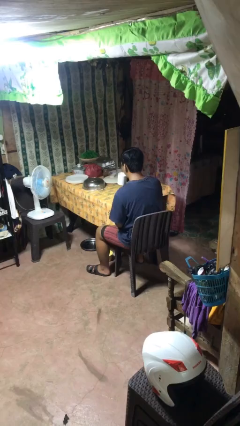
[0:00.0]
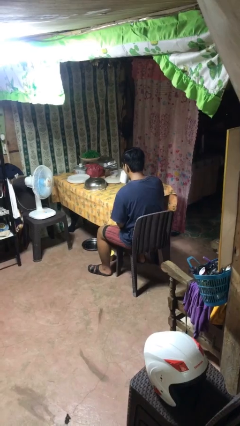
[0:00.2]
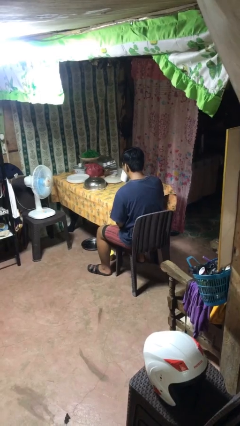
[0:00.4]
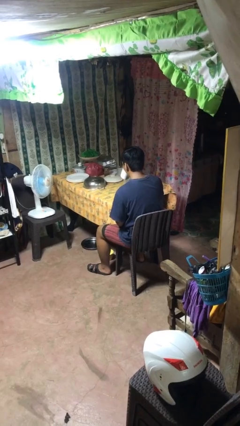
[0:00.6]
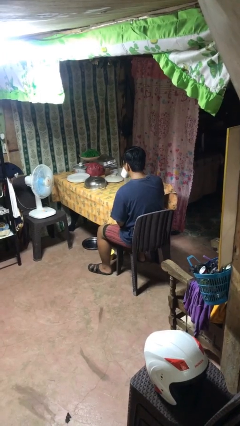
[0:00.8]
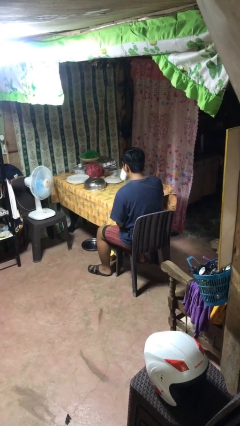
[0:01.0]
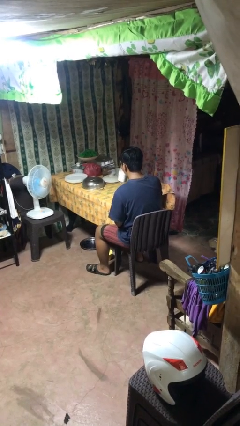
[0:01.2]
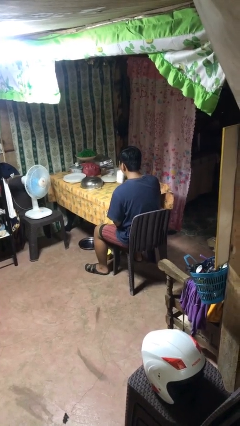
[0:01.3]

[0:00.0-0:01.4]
person drinks from mug

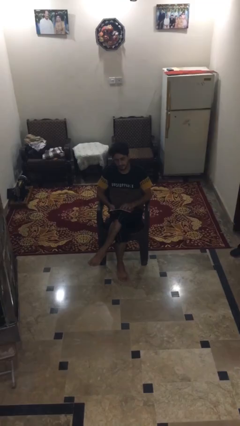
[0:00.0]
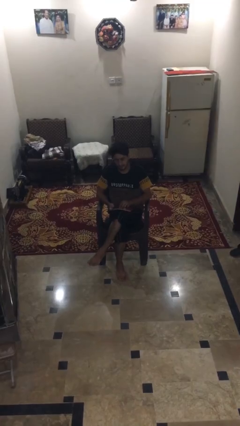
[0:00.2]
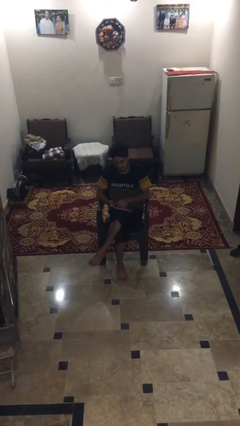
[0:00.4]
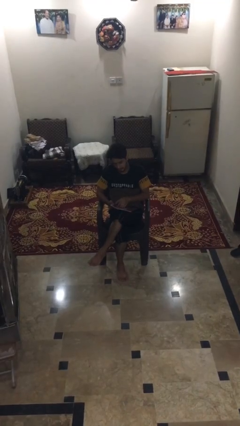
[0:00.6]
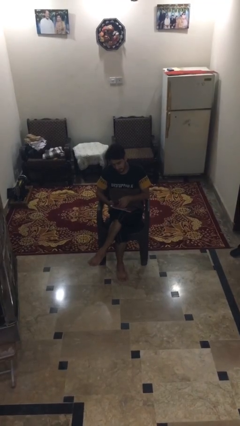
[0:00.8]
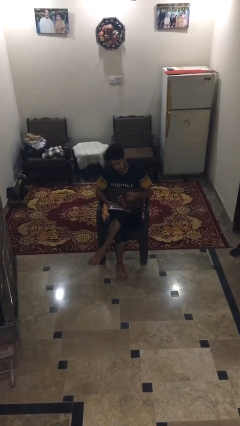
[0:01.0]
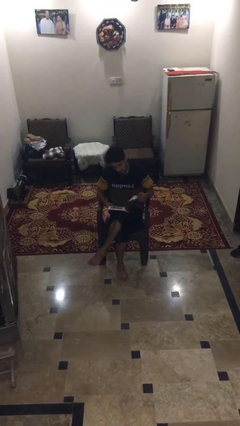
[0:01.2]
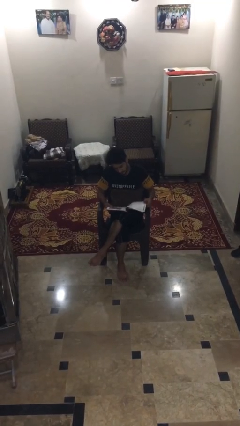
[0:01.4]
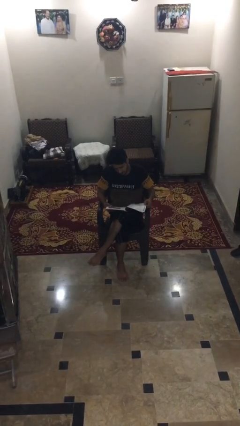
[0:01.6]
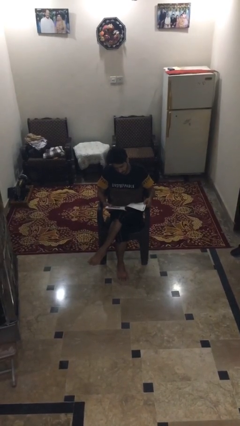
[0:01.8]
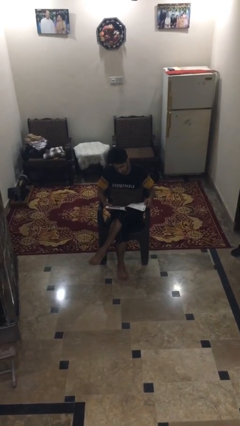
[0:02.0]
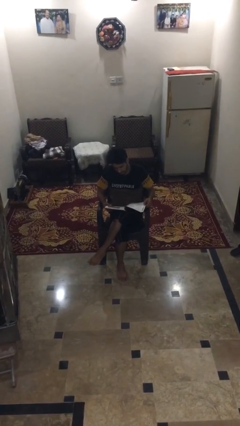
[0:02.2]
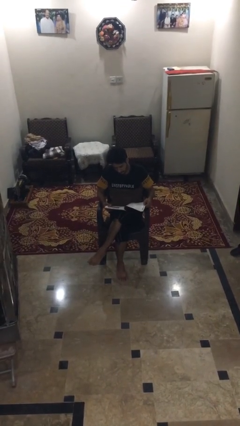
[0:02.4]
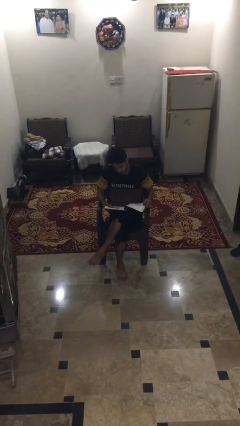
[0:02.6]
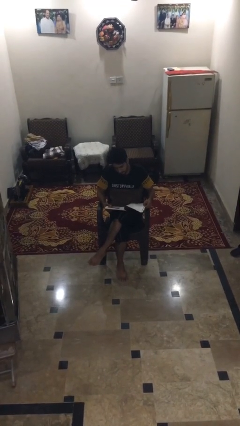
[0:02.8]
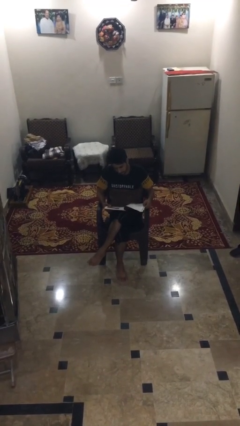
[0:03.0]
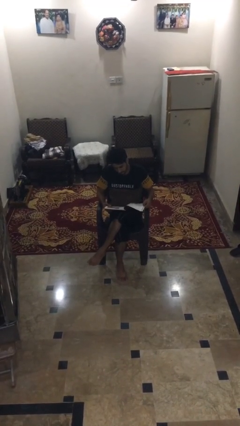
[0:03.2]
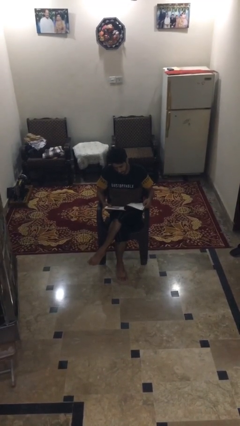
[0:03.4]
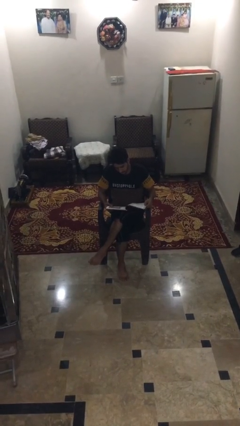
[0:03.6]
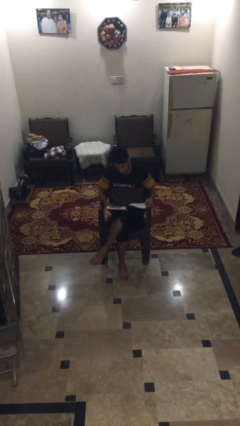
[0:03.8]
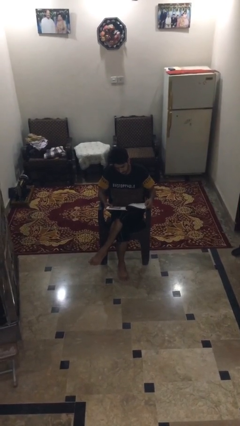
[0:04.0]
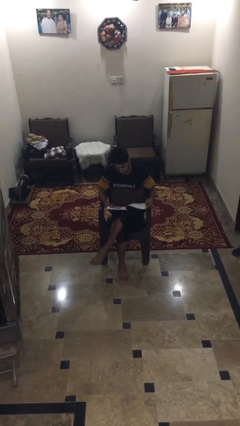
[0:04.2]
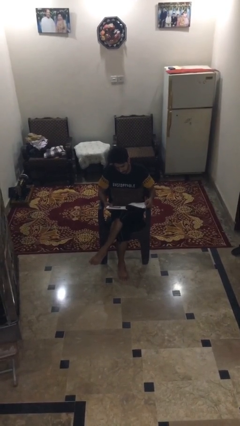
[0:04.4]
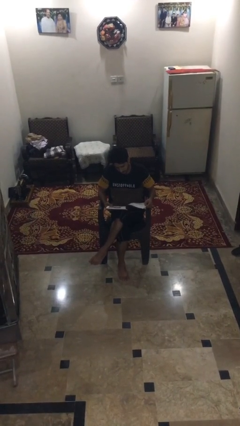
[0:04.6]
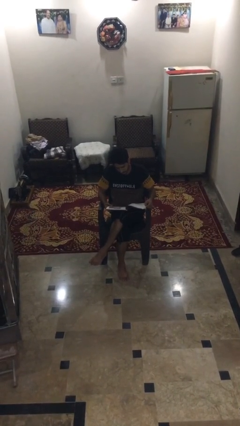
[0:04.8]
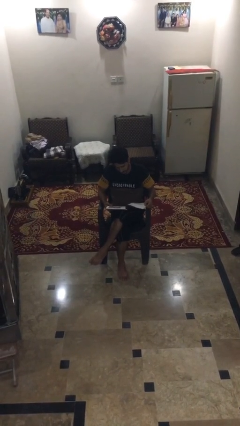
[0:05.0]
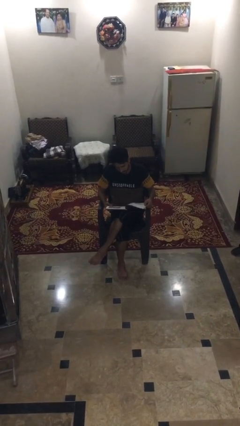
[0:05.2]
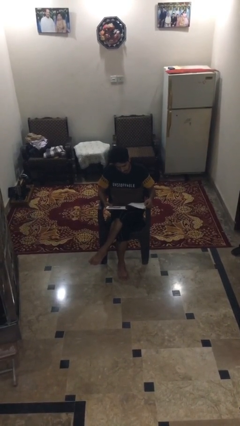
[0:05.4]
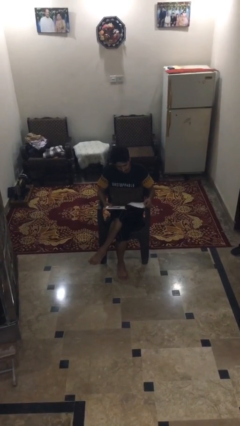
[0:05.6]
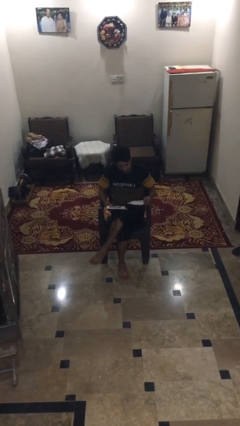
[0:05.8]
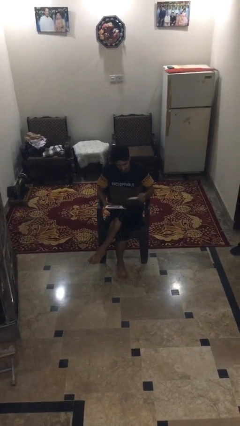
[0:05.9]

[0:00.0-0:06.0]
person reads magazine

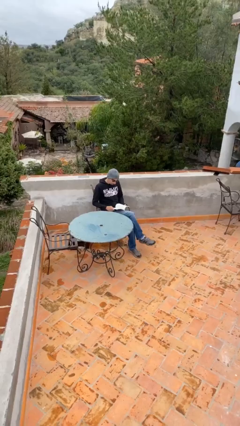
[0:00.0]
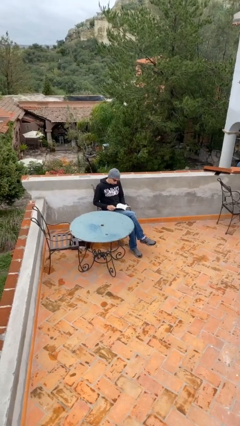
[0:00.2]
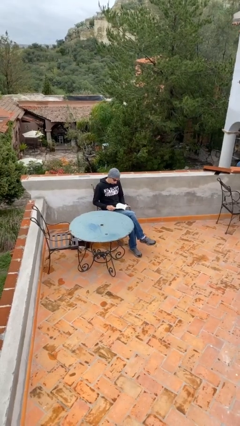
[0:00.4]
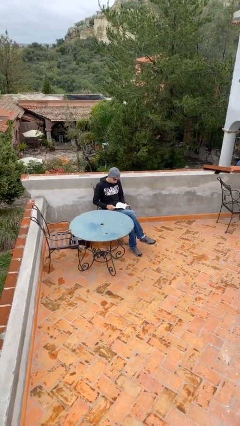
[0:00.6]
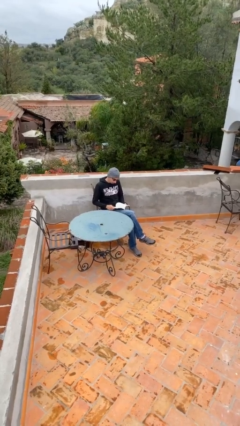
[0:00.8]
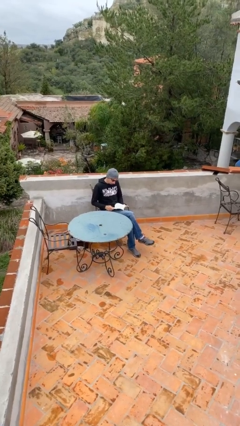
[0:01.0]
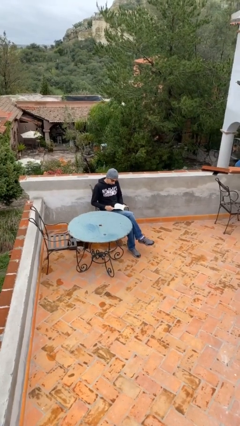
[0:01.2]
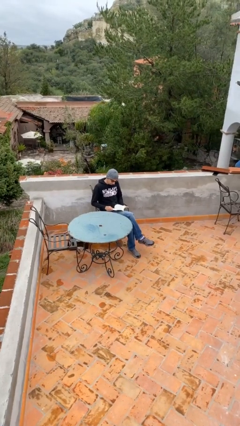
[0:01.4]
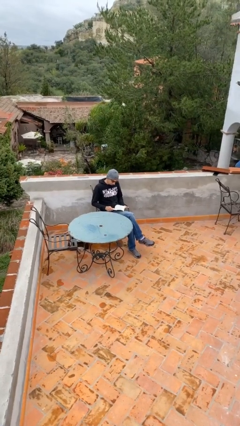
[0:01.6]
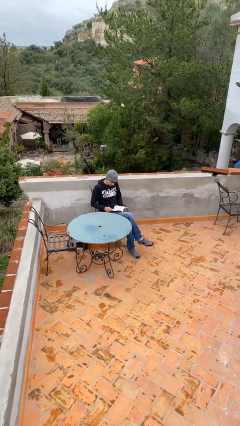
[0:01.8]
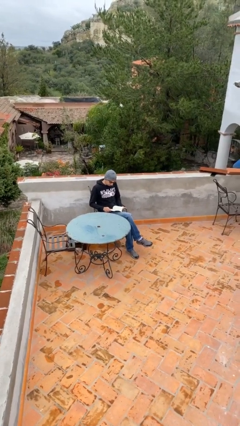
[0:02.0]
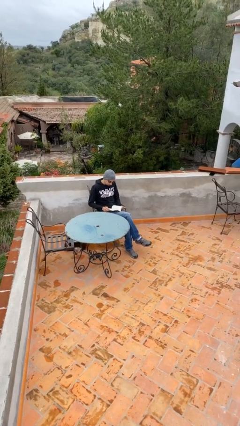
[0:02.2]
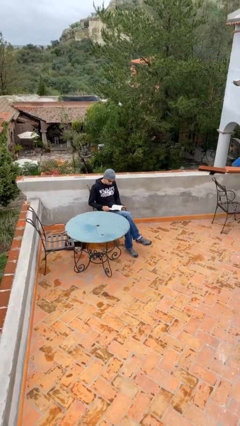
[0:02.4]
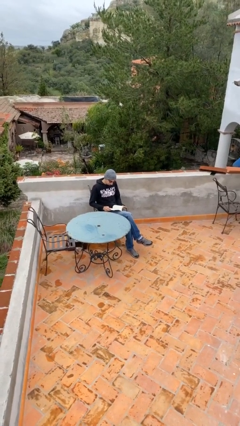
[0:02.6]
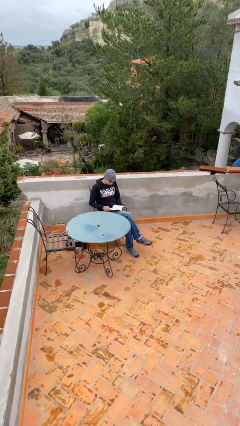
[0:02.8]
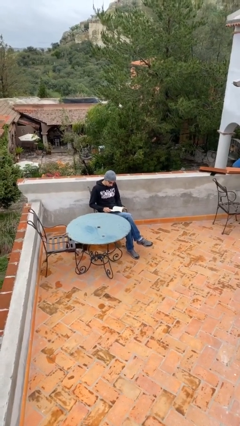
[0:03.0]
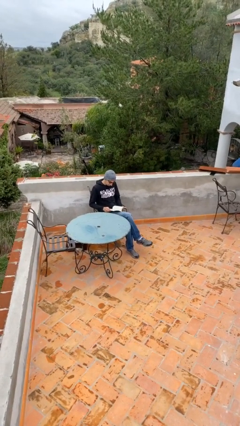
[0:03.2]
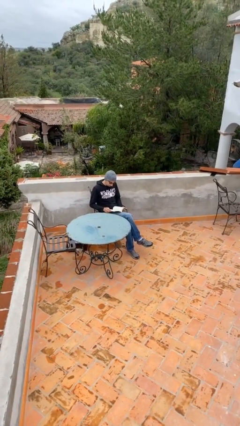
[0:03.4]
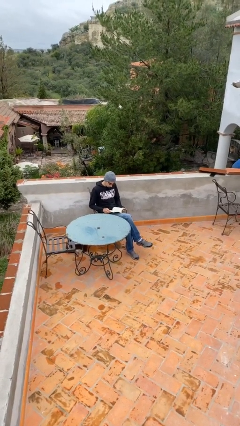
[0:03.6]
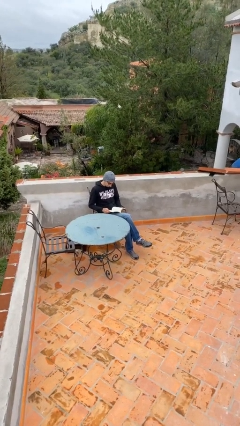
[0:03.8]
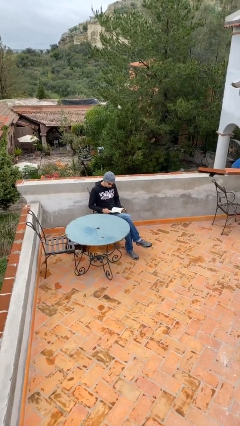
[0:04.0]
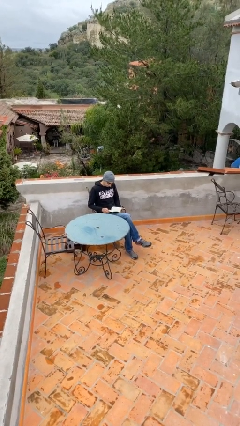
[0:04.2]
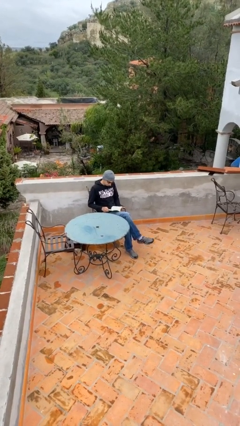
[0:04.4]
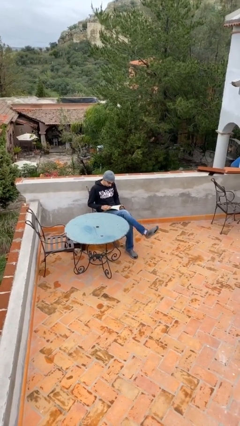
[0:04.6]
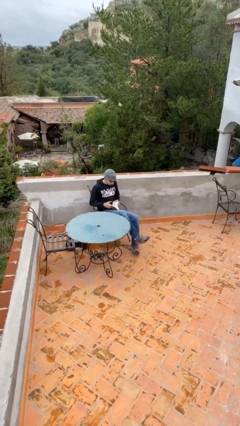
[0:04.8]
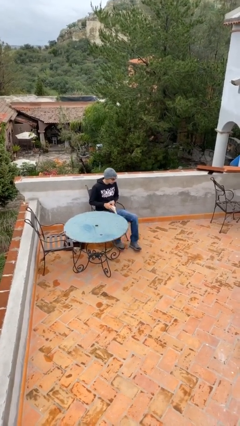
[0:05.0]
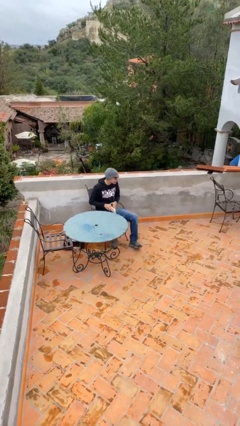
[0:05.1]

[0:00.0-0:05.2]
person reads document

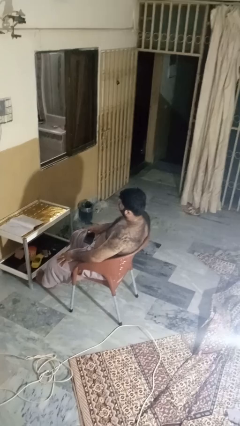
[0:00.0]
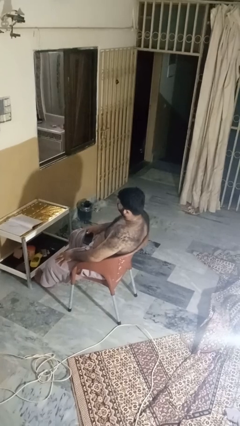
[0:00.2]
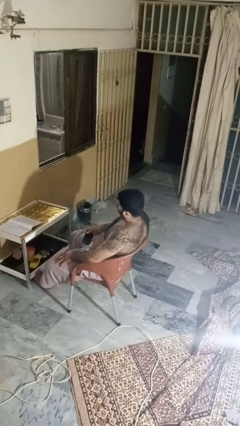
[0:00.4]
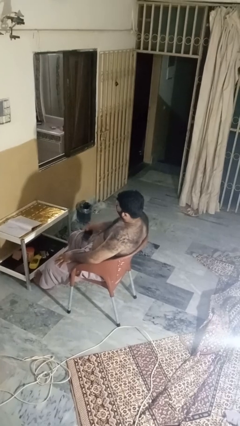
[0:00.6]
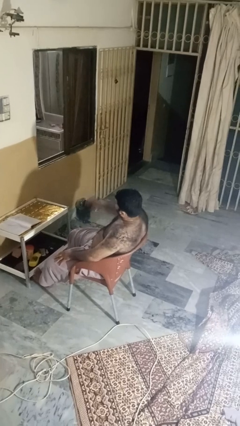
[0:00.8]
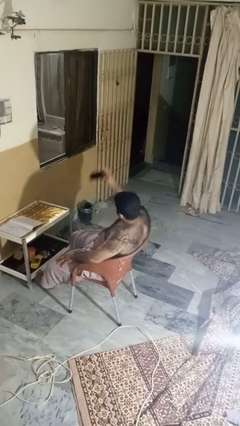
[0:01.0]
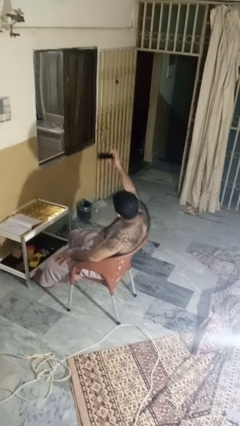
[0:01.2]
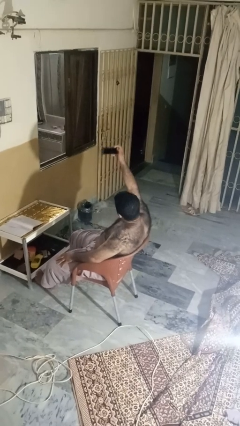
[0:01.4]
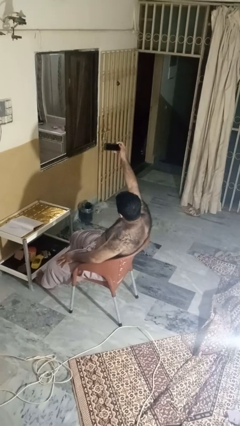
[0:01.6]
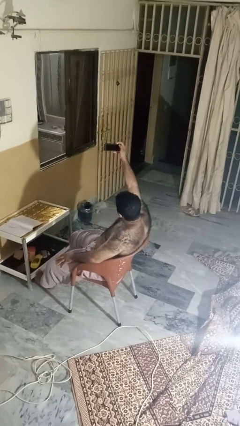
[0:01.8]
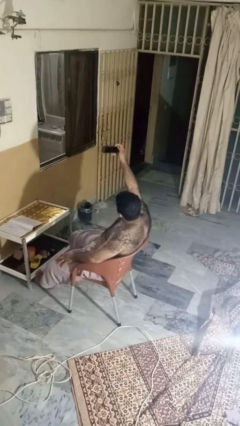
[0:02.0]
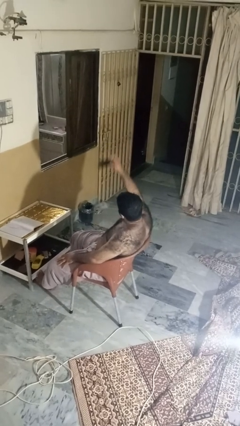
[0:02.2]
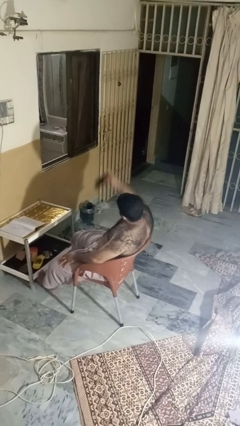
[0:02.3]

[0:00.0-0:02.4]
person takes selfie

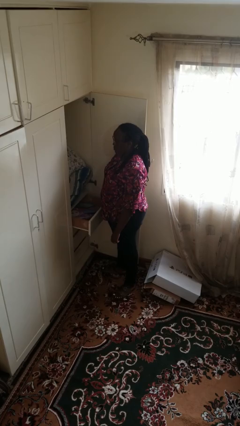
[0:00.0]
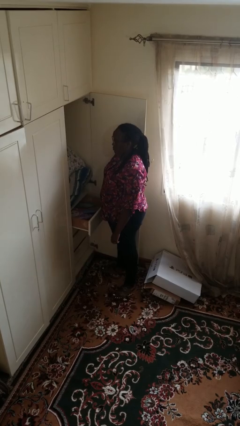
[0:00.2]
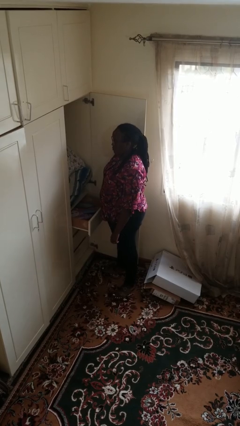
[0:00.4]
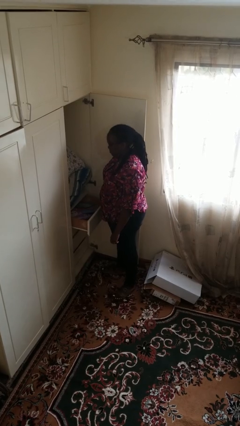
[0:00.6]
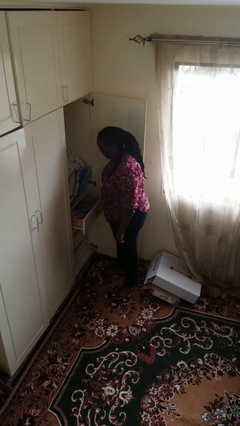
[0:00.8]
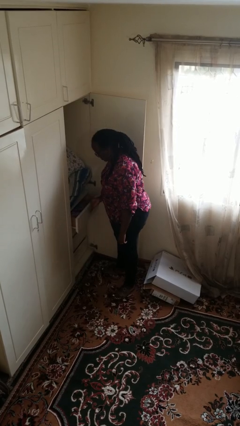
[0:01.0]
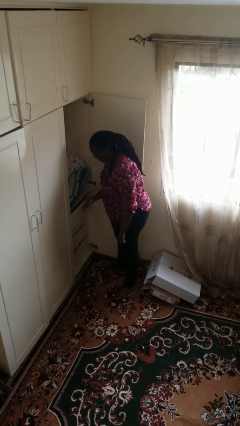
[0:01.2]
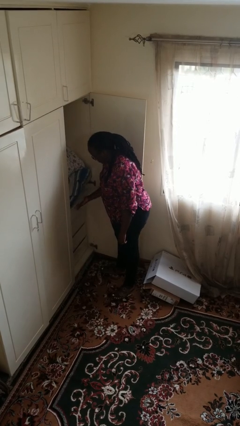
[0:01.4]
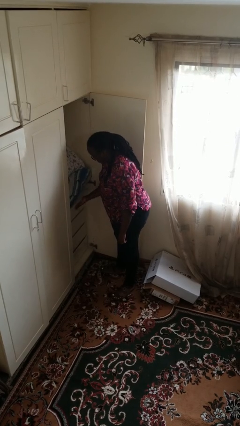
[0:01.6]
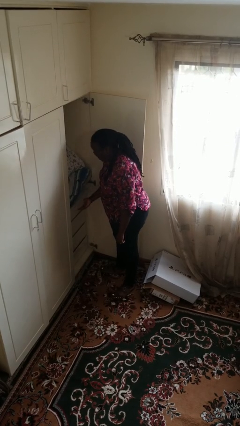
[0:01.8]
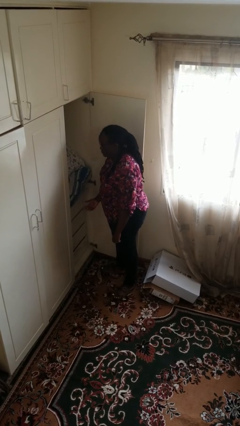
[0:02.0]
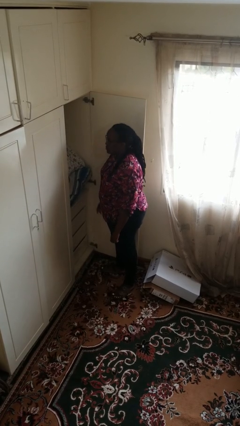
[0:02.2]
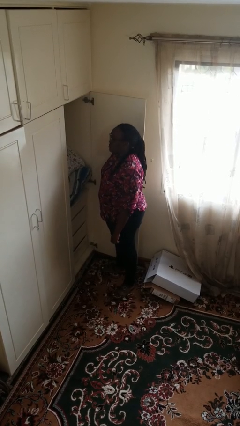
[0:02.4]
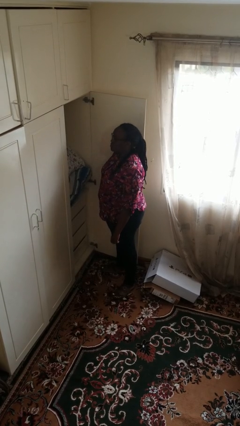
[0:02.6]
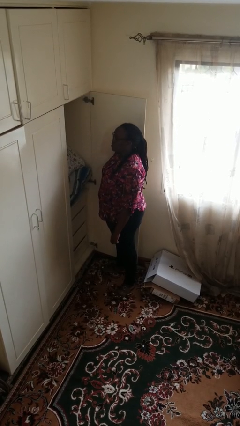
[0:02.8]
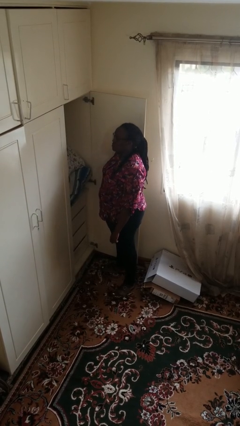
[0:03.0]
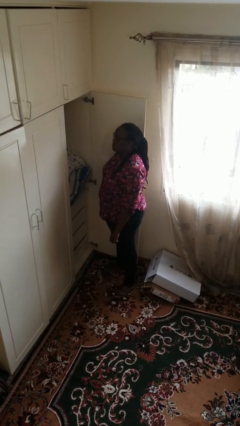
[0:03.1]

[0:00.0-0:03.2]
person closes dresser drawer
